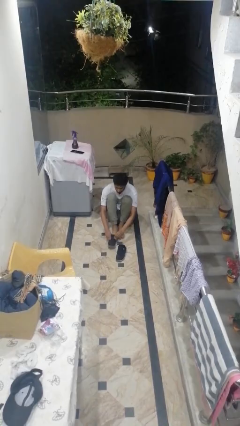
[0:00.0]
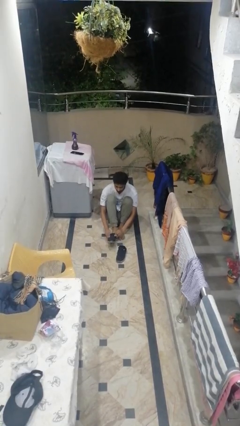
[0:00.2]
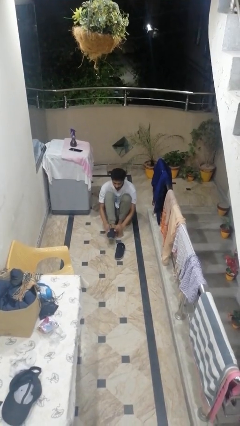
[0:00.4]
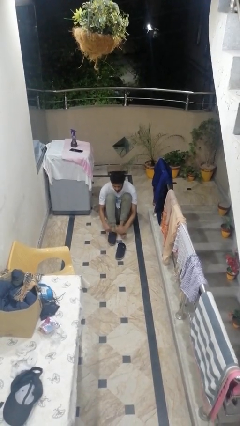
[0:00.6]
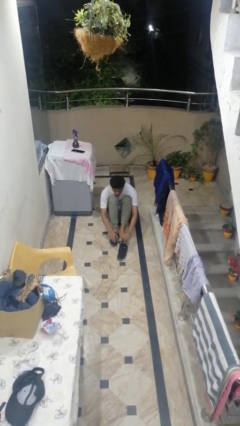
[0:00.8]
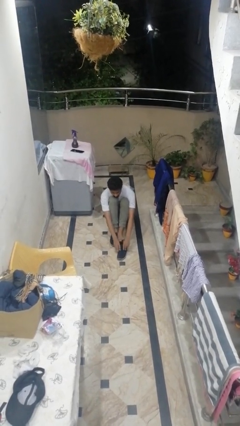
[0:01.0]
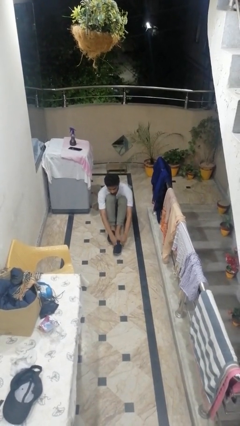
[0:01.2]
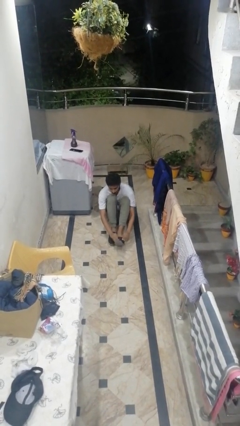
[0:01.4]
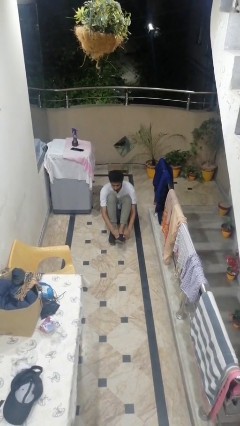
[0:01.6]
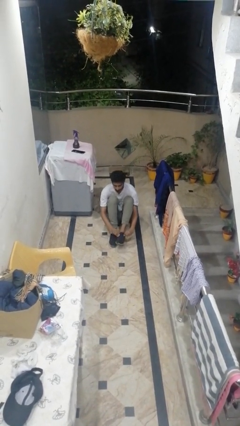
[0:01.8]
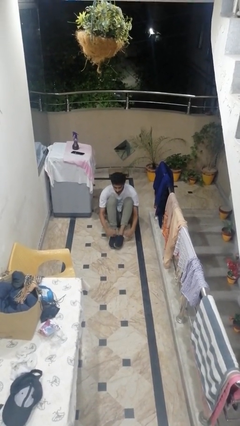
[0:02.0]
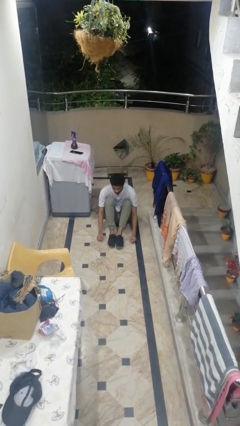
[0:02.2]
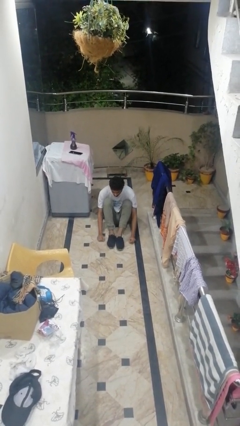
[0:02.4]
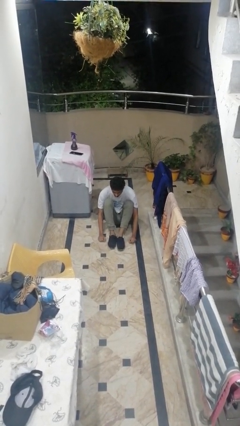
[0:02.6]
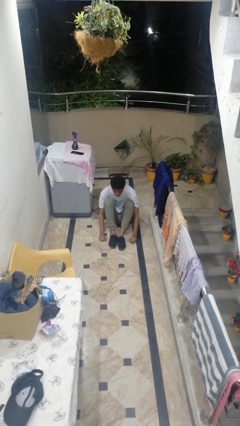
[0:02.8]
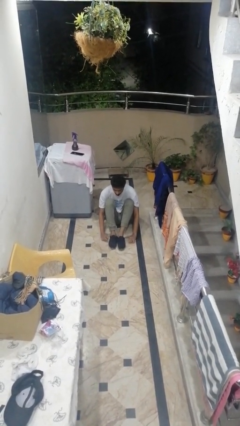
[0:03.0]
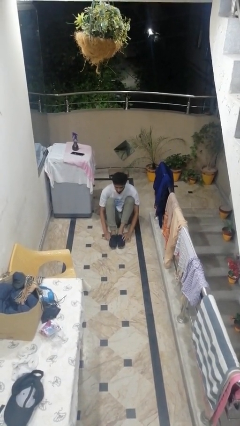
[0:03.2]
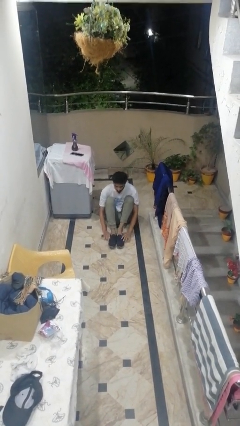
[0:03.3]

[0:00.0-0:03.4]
person puts on shoes

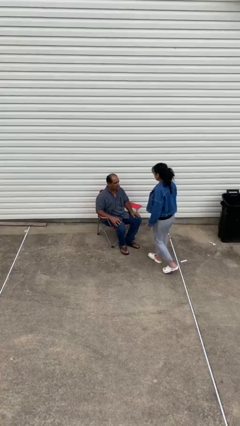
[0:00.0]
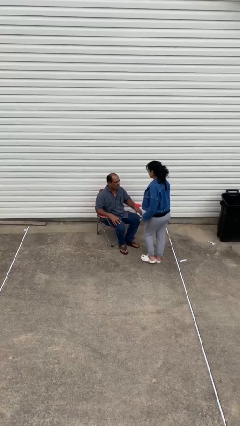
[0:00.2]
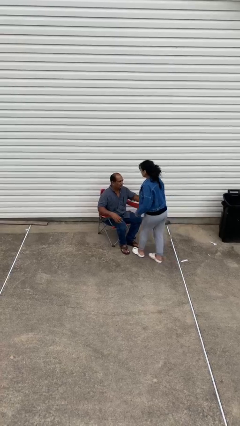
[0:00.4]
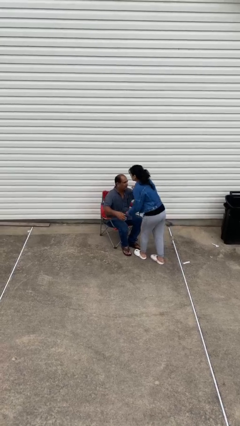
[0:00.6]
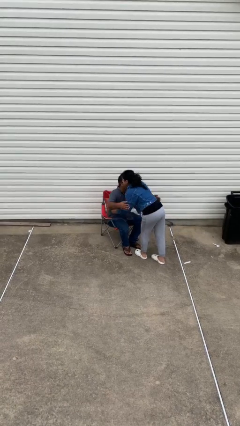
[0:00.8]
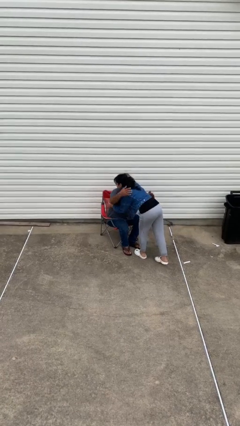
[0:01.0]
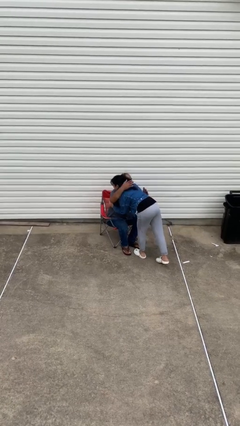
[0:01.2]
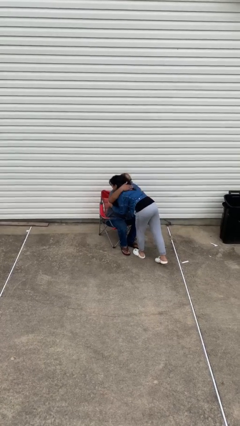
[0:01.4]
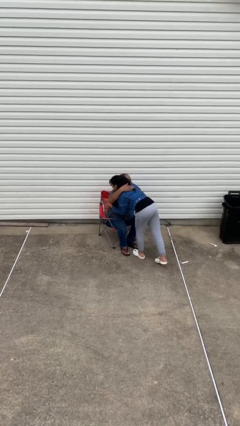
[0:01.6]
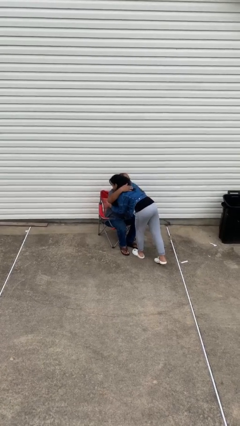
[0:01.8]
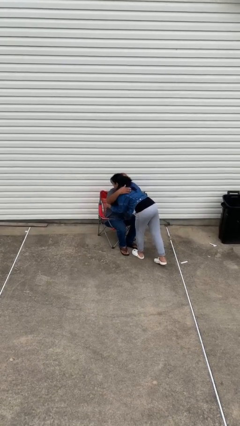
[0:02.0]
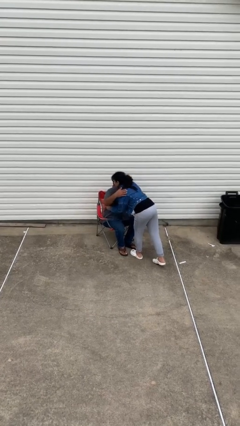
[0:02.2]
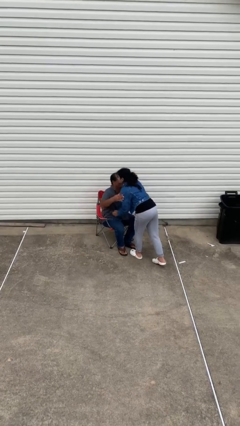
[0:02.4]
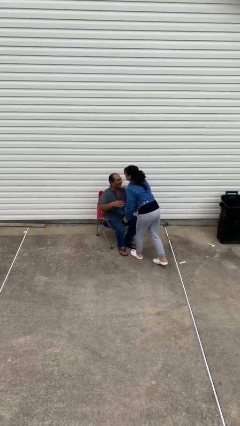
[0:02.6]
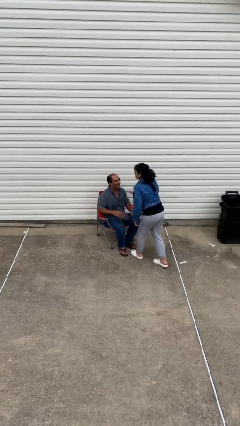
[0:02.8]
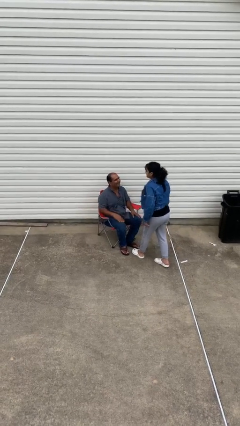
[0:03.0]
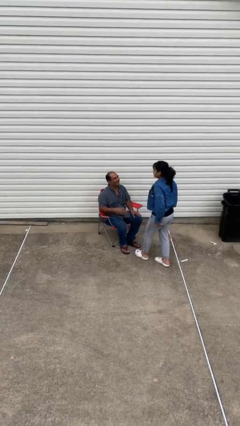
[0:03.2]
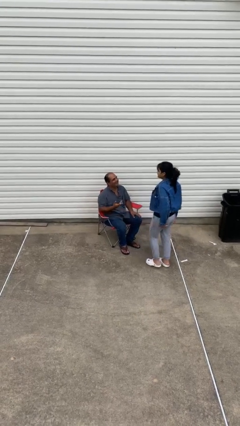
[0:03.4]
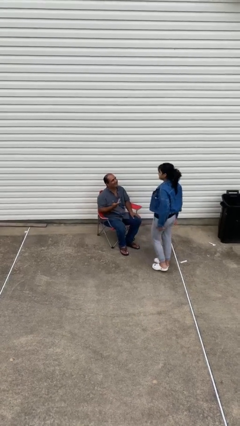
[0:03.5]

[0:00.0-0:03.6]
person embraces person

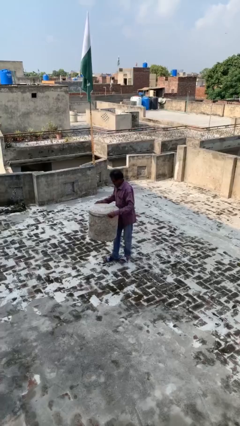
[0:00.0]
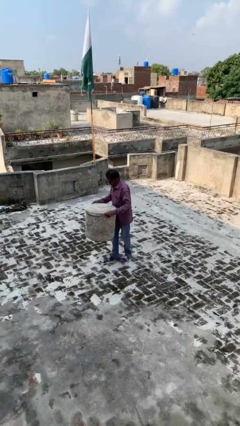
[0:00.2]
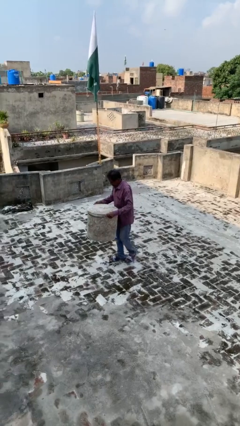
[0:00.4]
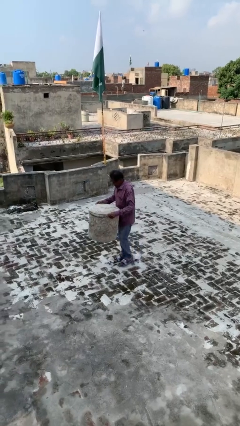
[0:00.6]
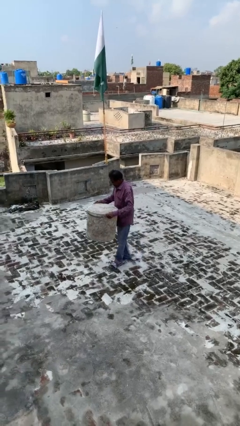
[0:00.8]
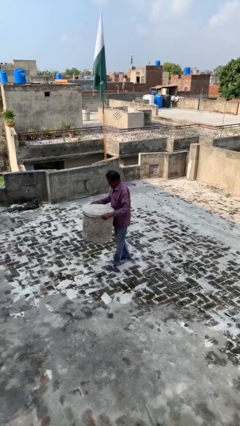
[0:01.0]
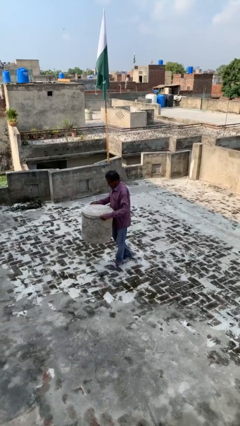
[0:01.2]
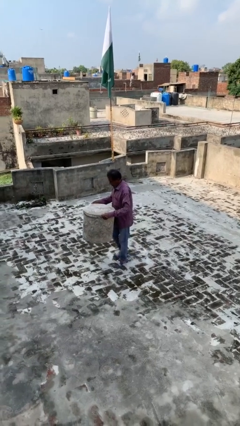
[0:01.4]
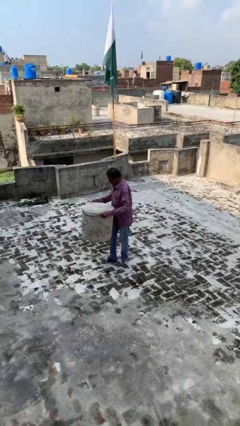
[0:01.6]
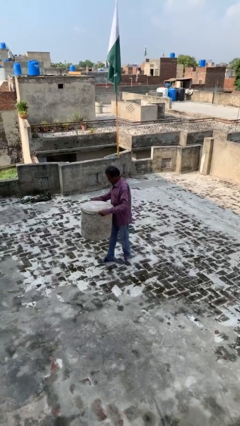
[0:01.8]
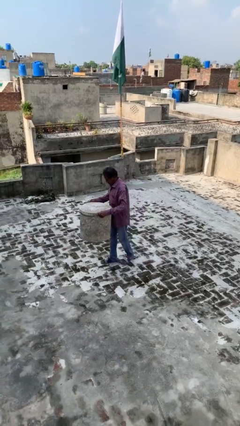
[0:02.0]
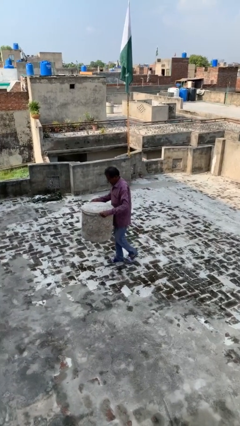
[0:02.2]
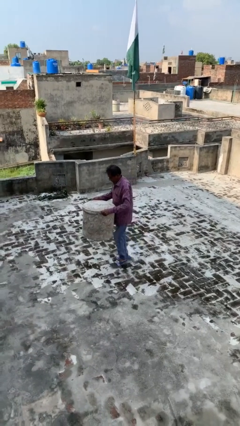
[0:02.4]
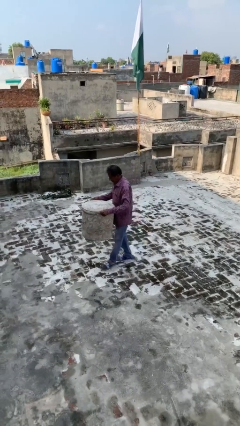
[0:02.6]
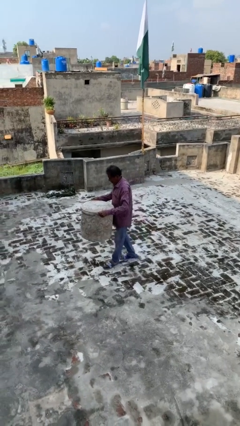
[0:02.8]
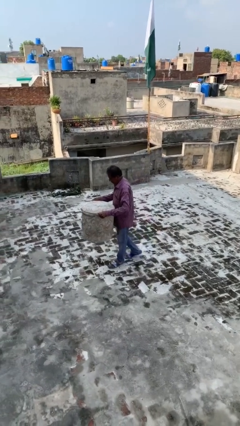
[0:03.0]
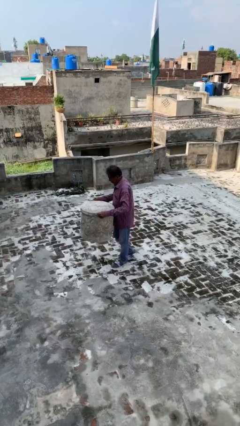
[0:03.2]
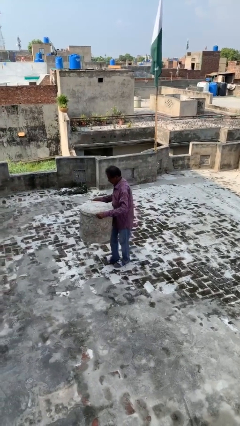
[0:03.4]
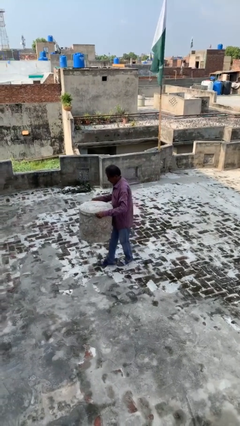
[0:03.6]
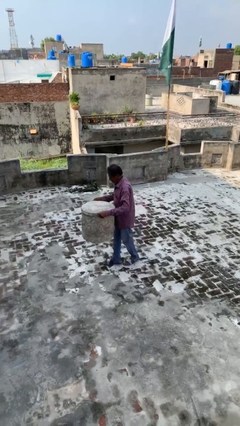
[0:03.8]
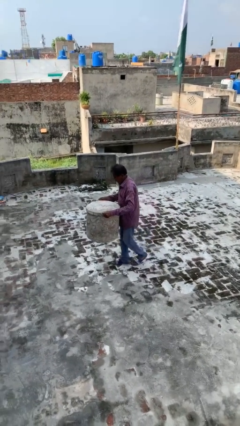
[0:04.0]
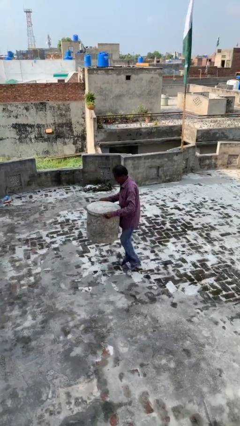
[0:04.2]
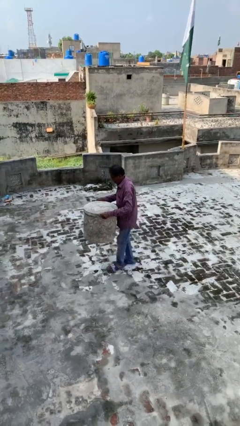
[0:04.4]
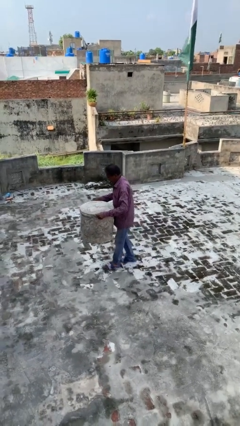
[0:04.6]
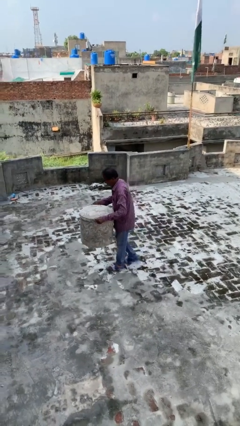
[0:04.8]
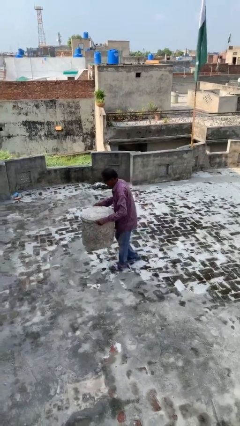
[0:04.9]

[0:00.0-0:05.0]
person carries heavy object

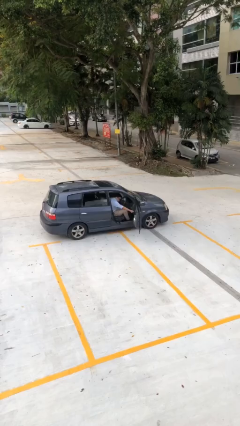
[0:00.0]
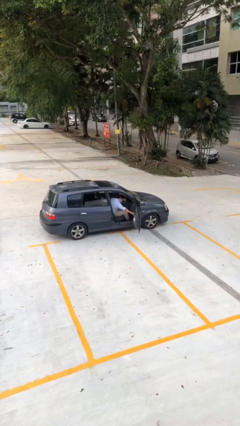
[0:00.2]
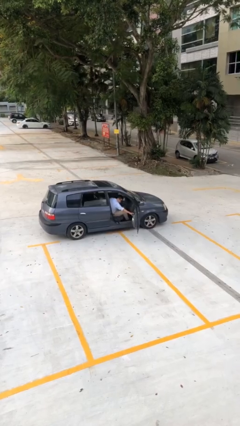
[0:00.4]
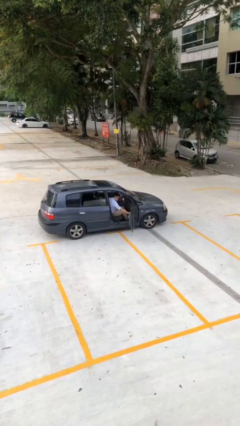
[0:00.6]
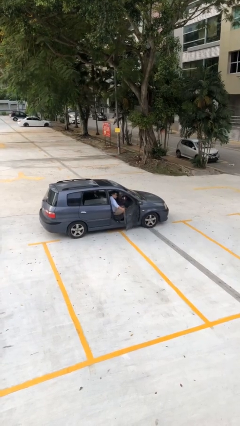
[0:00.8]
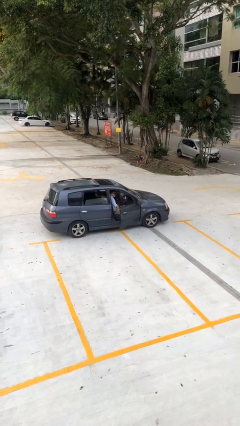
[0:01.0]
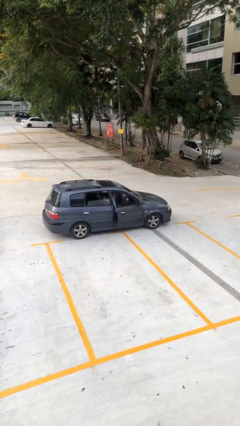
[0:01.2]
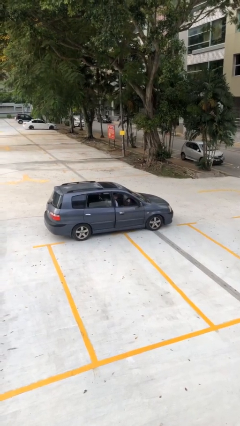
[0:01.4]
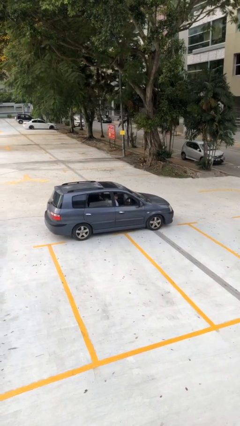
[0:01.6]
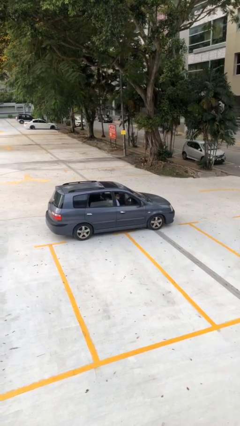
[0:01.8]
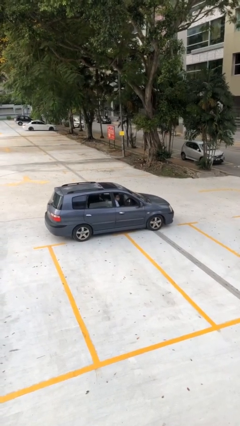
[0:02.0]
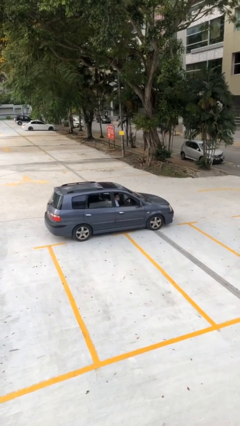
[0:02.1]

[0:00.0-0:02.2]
person closes car door

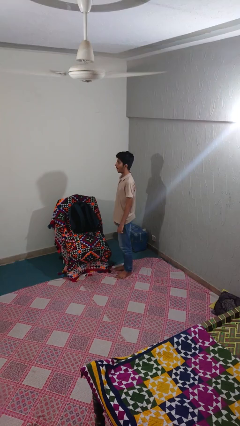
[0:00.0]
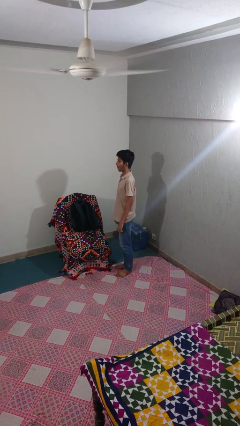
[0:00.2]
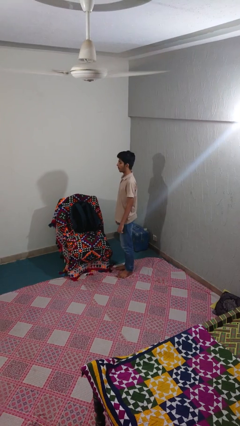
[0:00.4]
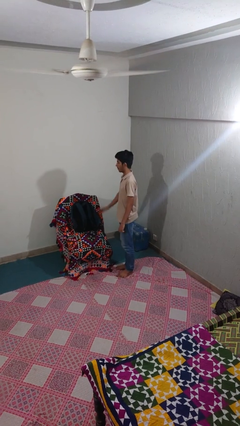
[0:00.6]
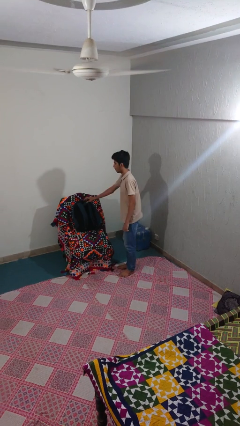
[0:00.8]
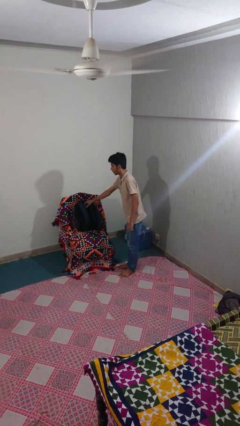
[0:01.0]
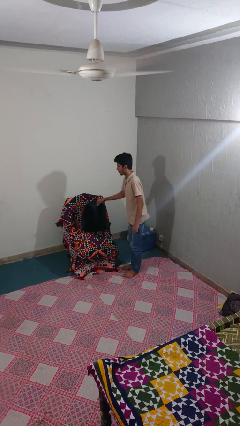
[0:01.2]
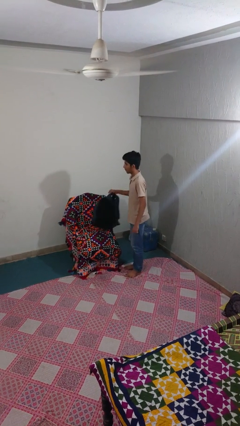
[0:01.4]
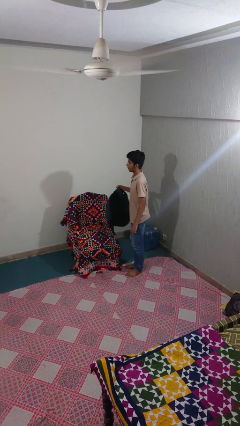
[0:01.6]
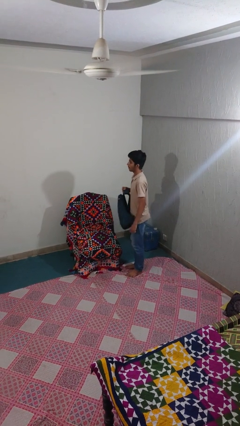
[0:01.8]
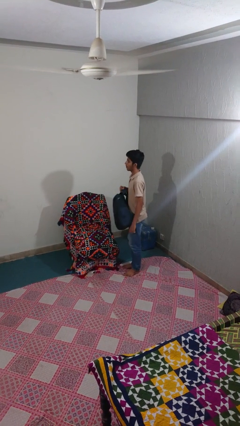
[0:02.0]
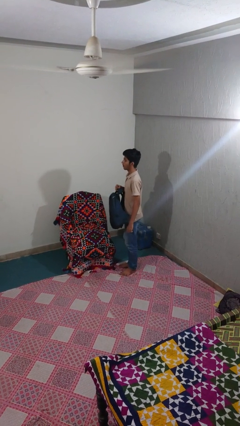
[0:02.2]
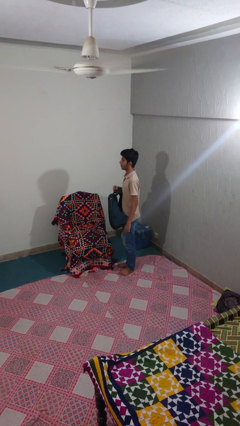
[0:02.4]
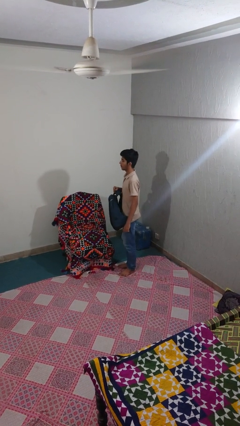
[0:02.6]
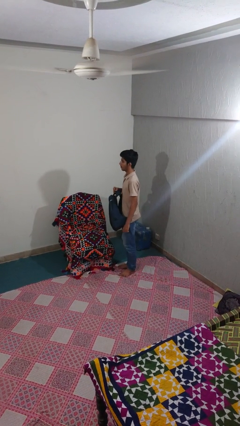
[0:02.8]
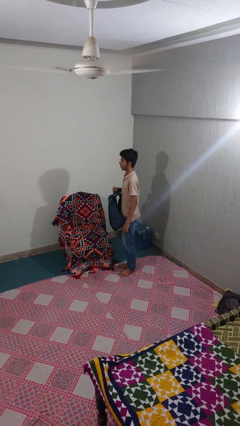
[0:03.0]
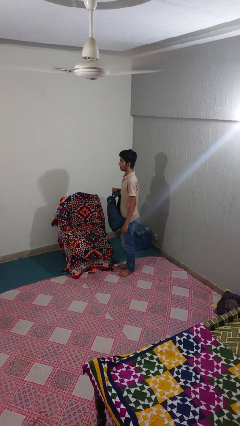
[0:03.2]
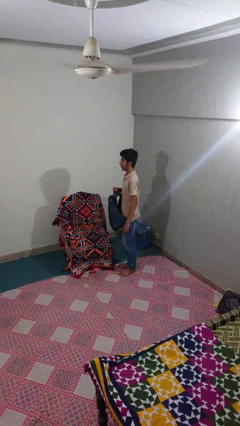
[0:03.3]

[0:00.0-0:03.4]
person picks up object from couch

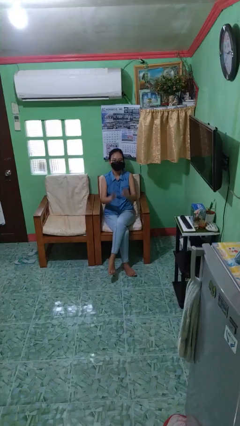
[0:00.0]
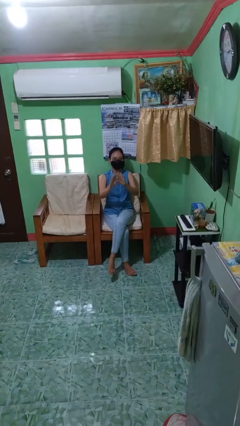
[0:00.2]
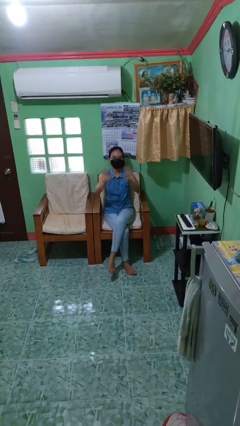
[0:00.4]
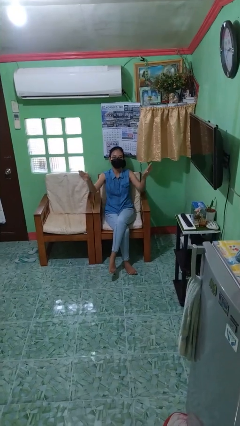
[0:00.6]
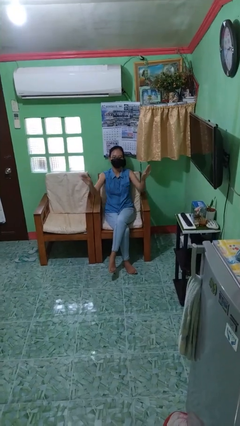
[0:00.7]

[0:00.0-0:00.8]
person gestures zoom in
